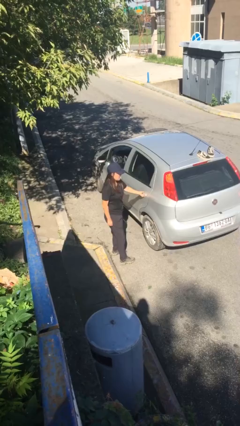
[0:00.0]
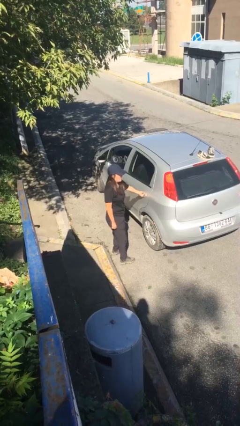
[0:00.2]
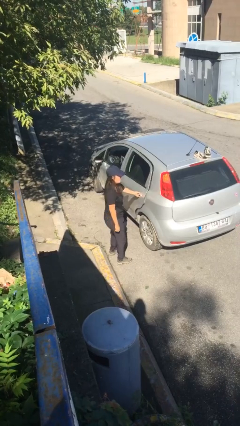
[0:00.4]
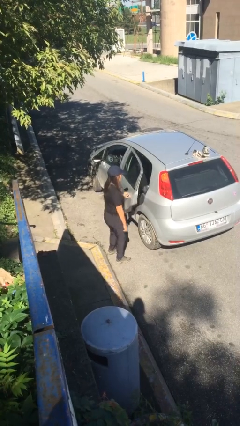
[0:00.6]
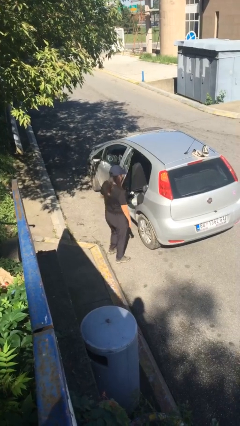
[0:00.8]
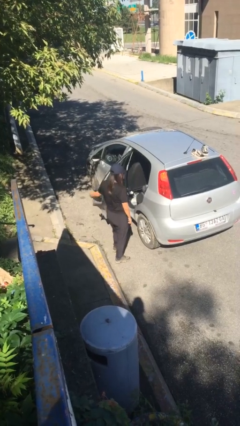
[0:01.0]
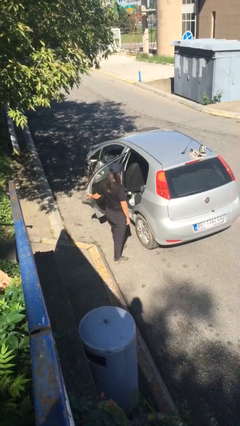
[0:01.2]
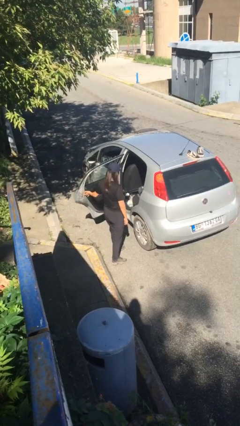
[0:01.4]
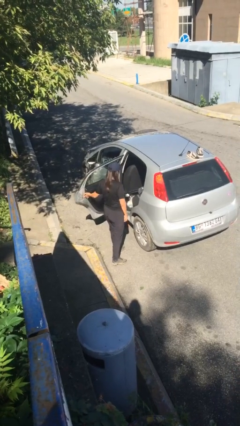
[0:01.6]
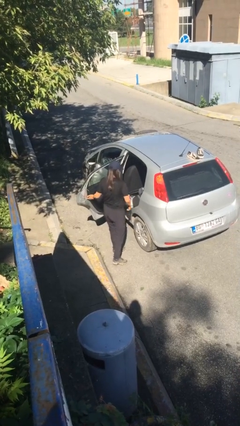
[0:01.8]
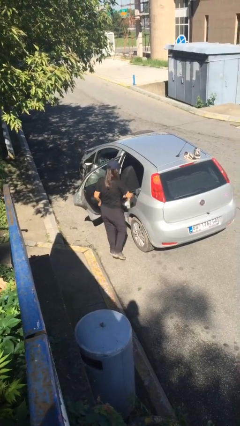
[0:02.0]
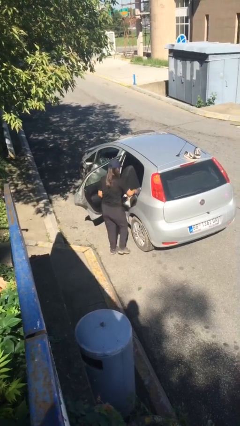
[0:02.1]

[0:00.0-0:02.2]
person opens car door

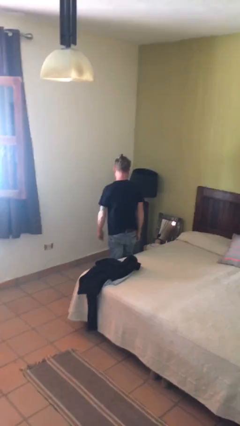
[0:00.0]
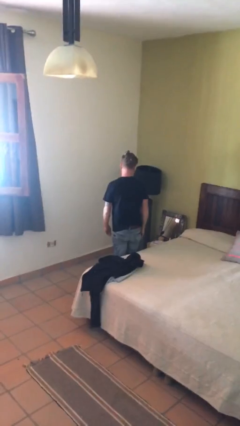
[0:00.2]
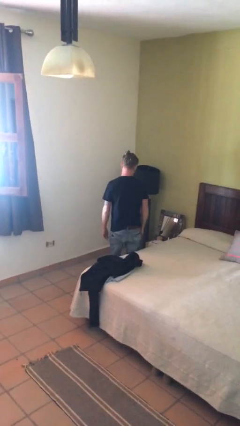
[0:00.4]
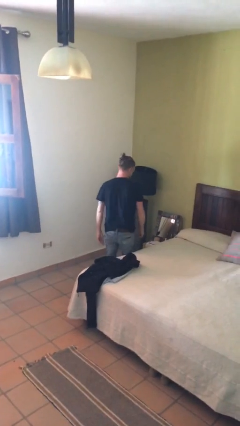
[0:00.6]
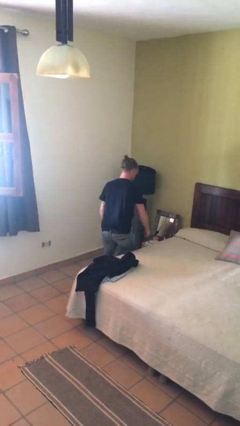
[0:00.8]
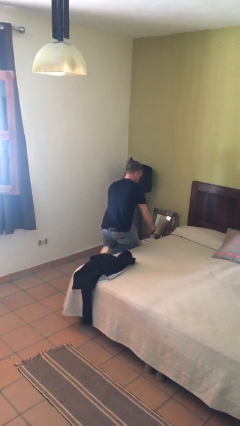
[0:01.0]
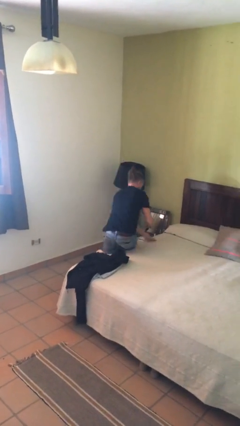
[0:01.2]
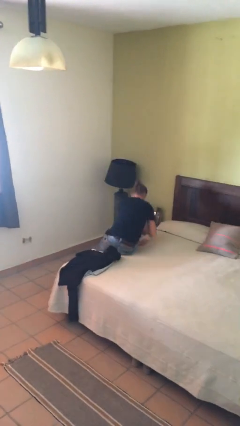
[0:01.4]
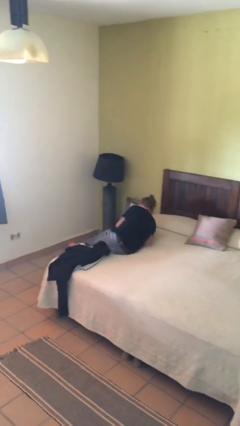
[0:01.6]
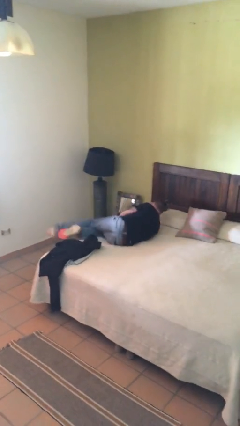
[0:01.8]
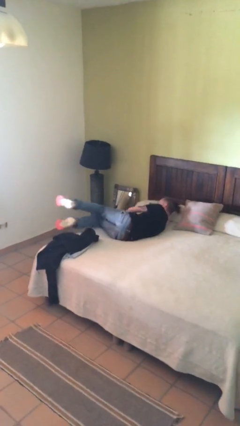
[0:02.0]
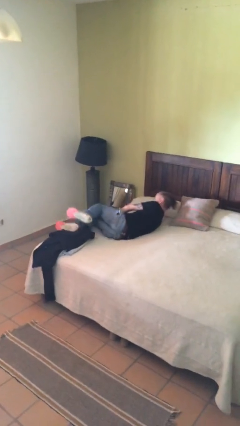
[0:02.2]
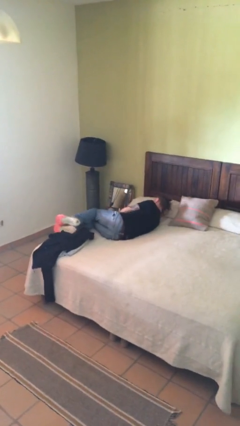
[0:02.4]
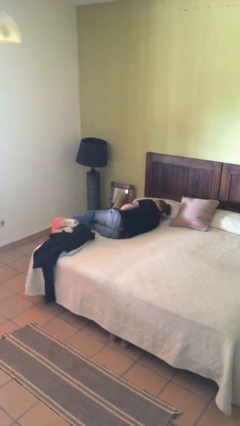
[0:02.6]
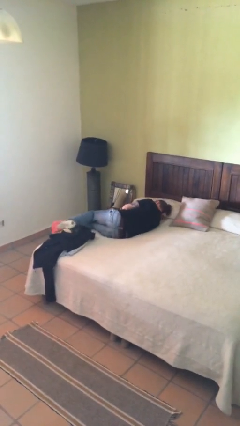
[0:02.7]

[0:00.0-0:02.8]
person lies down on bed

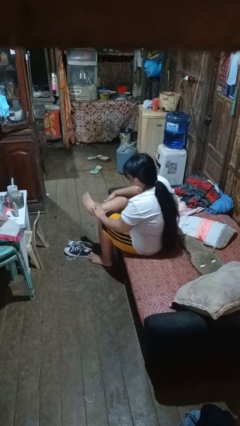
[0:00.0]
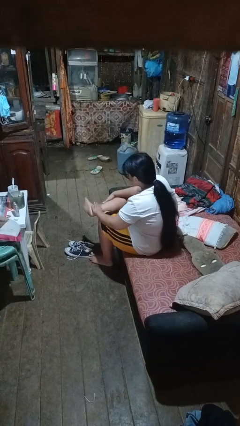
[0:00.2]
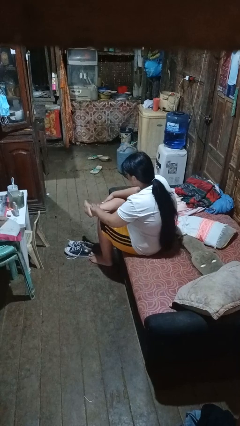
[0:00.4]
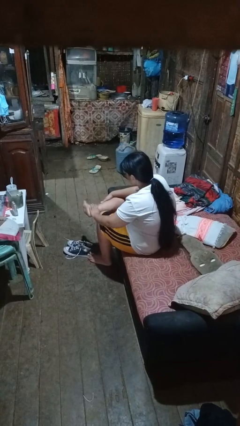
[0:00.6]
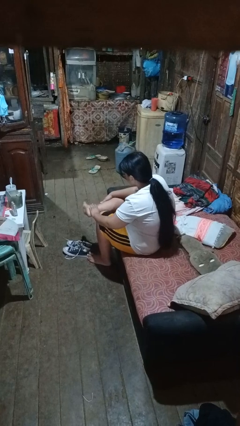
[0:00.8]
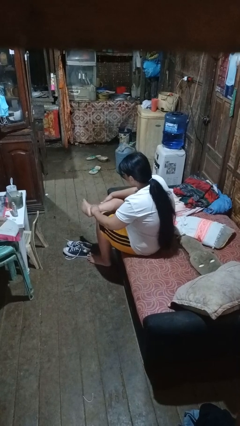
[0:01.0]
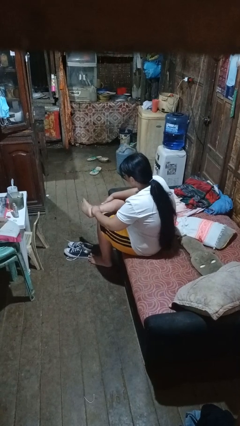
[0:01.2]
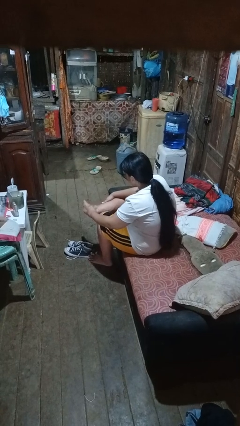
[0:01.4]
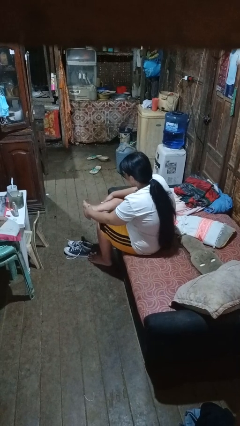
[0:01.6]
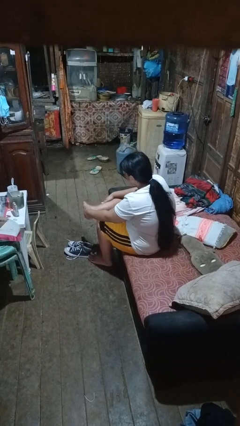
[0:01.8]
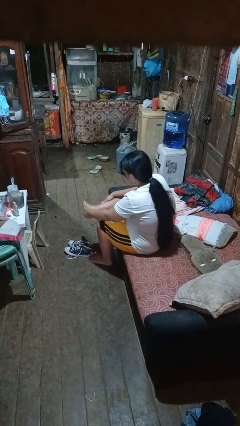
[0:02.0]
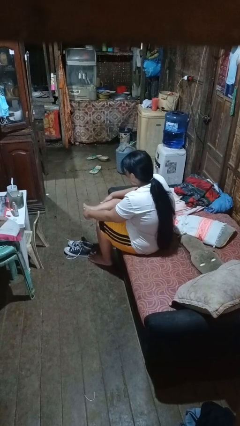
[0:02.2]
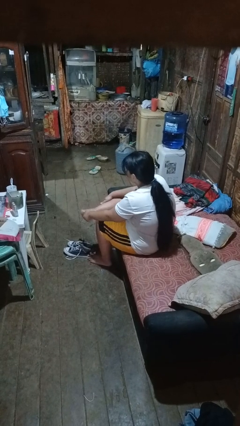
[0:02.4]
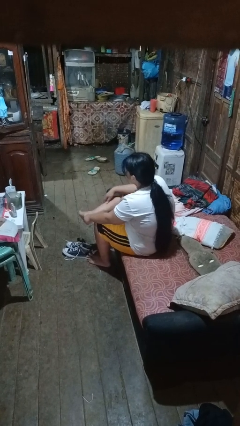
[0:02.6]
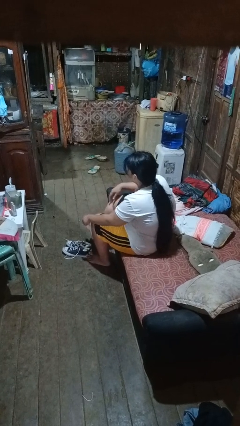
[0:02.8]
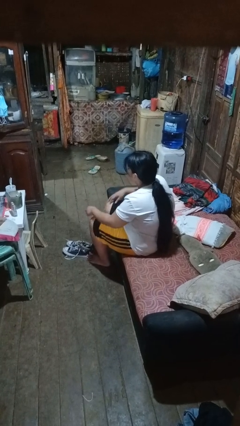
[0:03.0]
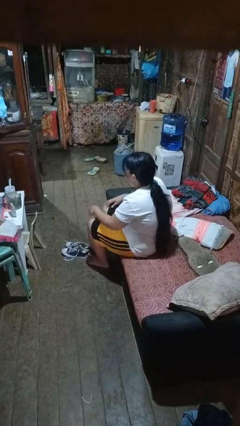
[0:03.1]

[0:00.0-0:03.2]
person rubs foot

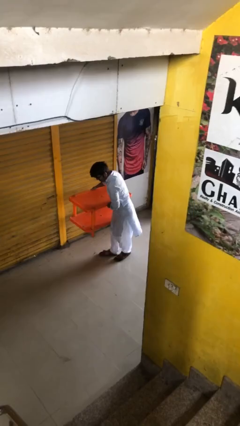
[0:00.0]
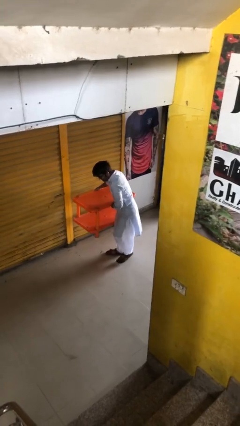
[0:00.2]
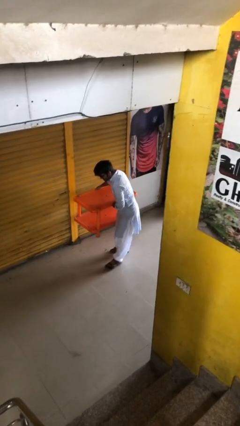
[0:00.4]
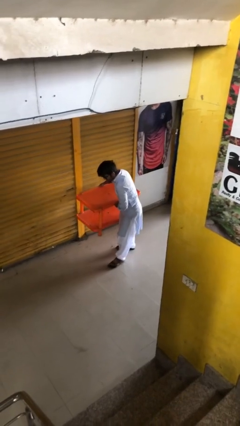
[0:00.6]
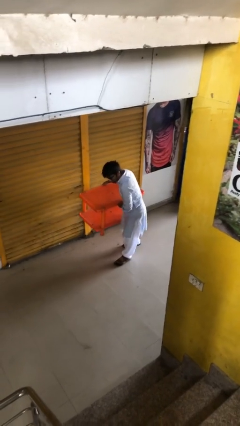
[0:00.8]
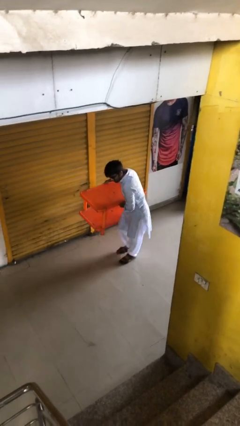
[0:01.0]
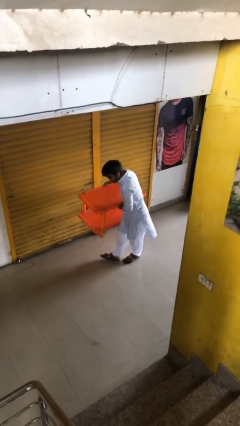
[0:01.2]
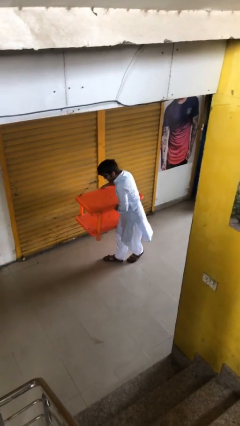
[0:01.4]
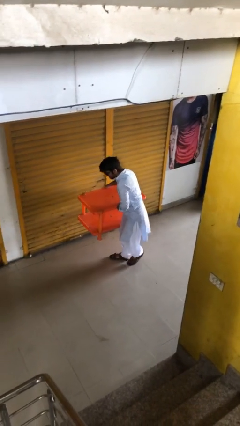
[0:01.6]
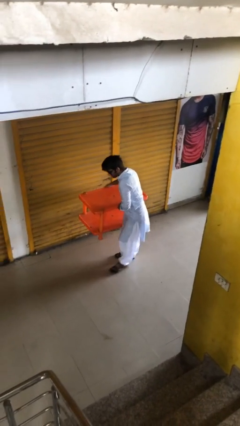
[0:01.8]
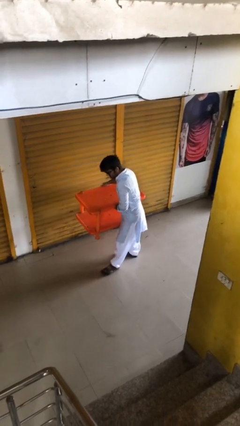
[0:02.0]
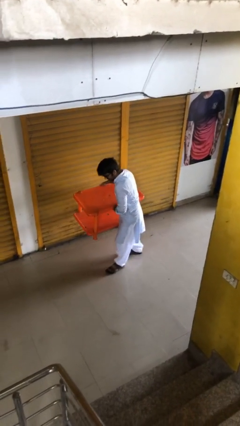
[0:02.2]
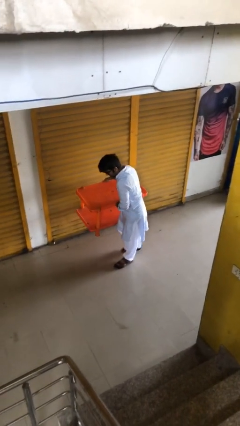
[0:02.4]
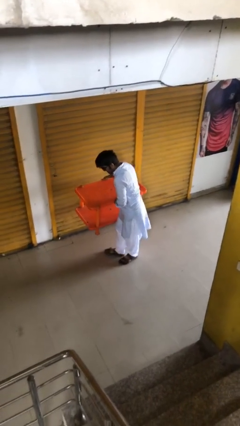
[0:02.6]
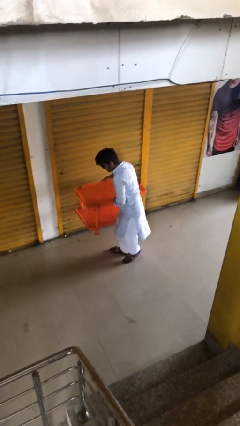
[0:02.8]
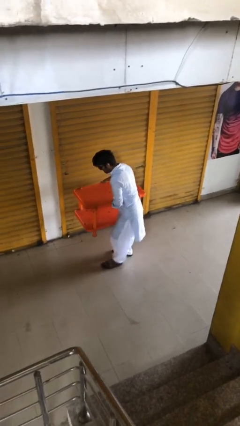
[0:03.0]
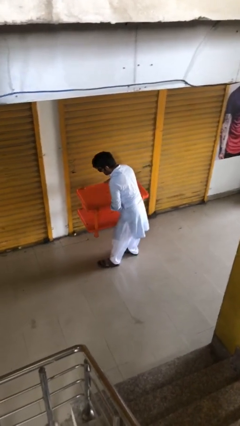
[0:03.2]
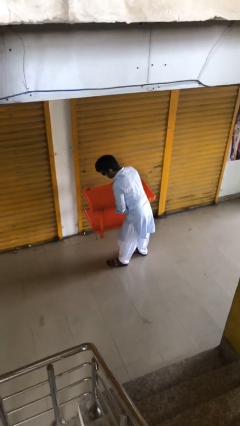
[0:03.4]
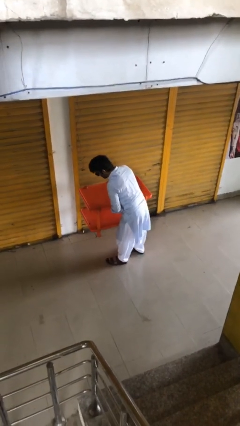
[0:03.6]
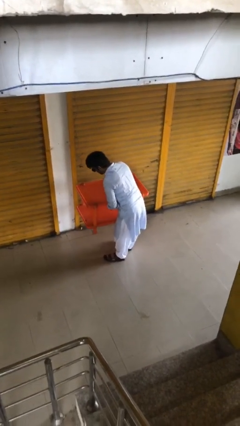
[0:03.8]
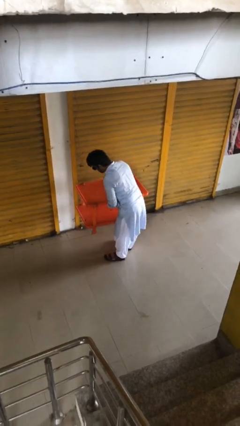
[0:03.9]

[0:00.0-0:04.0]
person carries heavy object

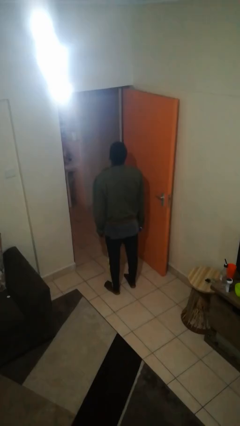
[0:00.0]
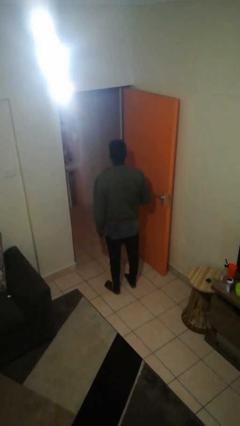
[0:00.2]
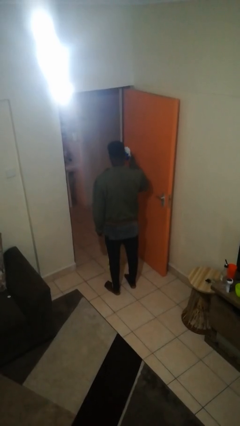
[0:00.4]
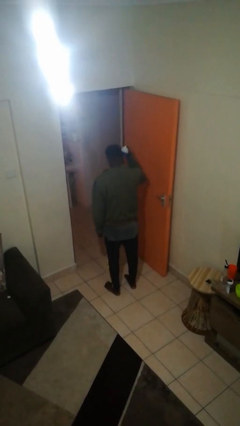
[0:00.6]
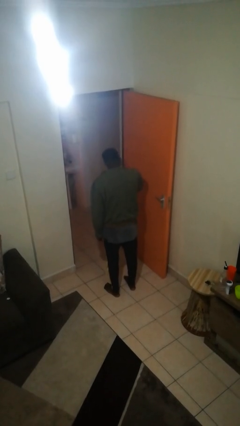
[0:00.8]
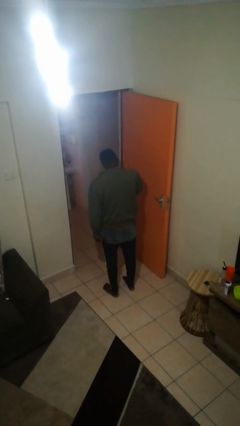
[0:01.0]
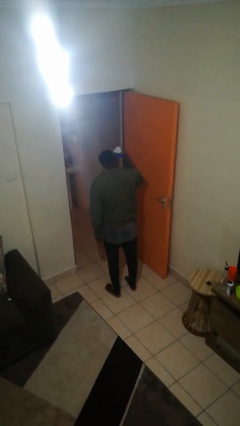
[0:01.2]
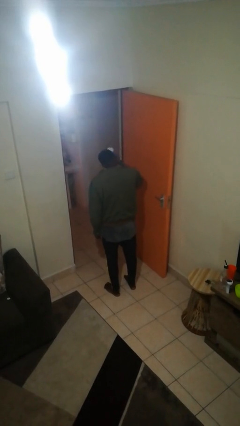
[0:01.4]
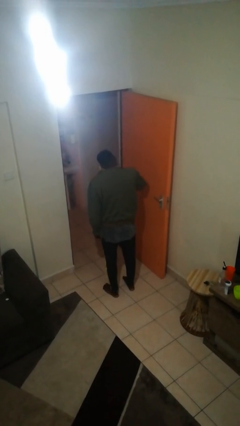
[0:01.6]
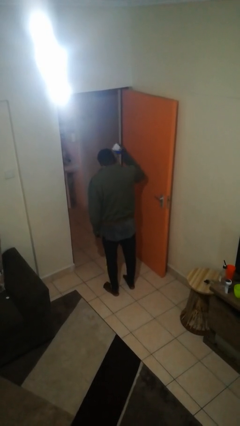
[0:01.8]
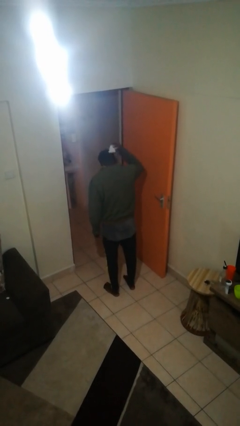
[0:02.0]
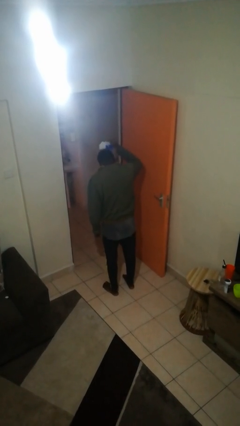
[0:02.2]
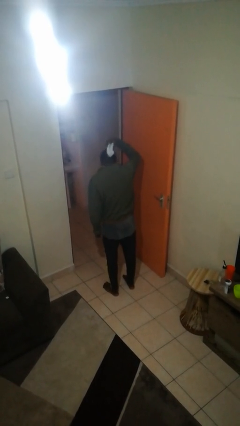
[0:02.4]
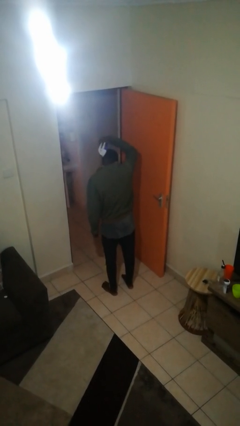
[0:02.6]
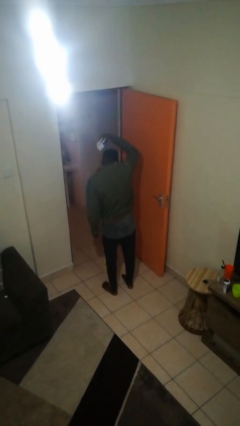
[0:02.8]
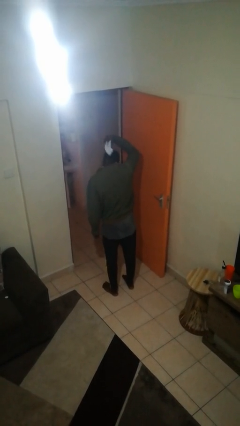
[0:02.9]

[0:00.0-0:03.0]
person brushes hair

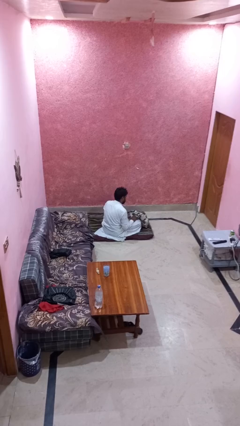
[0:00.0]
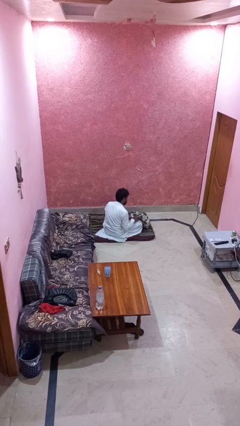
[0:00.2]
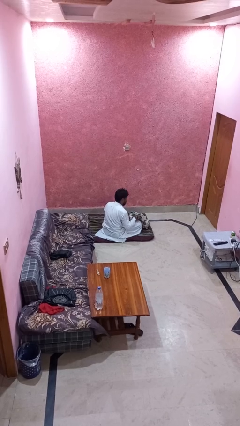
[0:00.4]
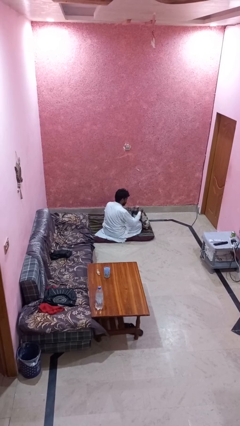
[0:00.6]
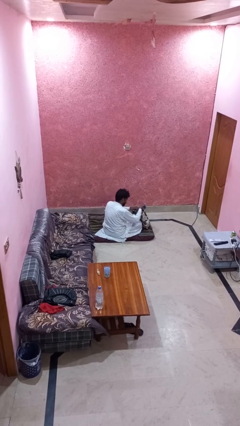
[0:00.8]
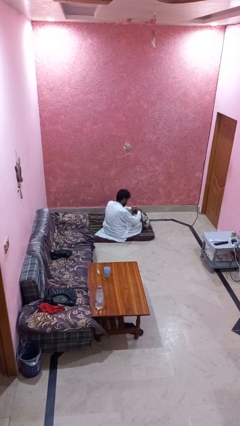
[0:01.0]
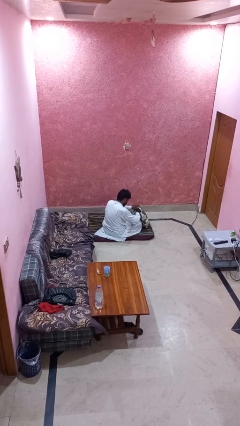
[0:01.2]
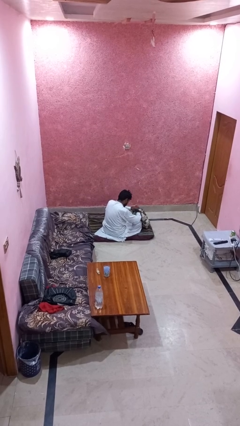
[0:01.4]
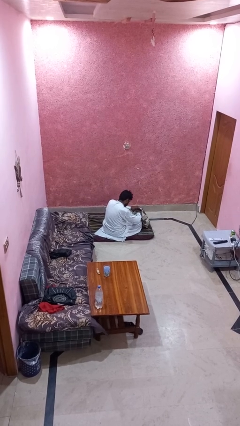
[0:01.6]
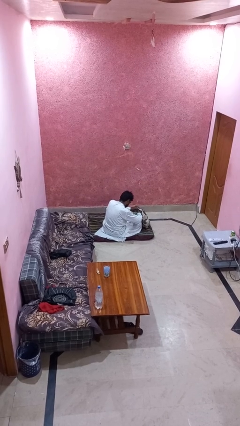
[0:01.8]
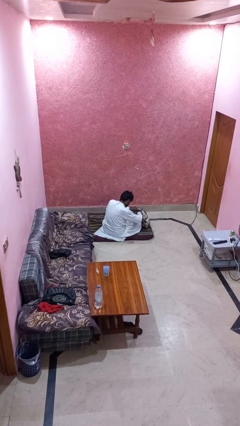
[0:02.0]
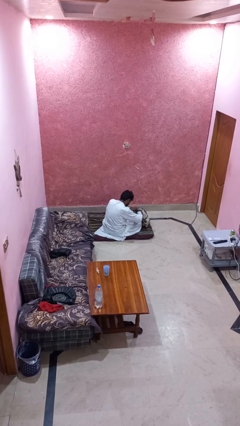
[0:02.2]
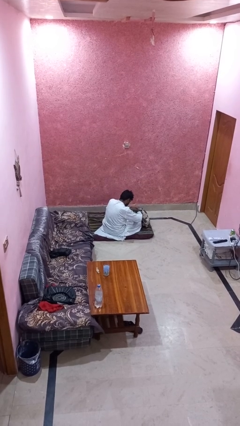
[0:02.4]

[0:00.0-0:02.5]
person searches in backpack
